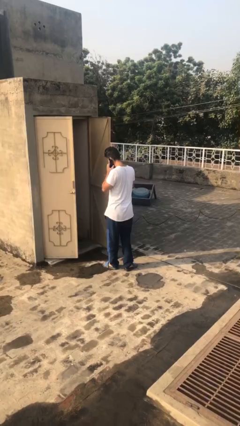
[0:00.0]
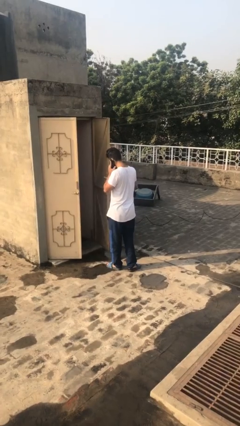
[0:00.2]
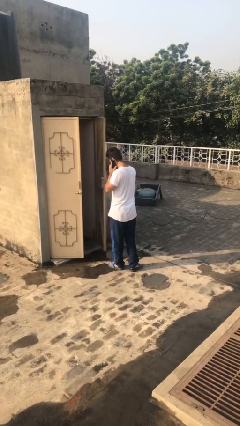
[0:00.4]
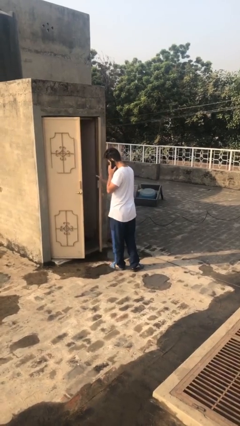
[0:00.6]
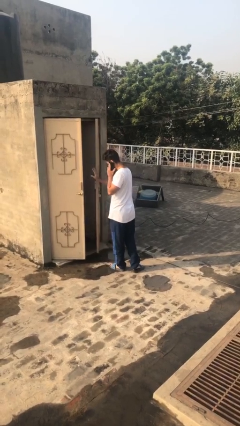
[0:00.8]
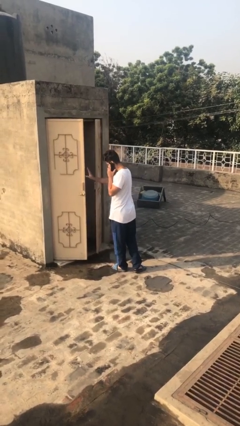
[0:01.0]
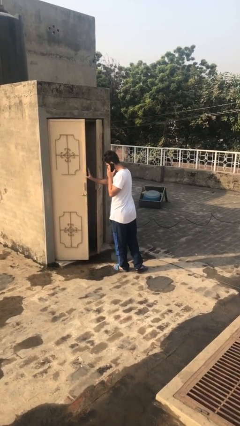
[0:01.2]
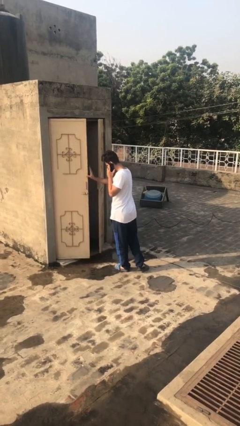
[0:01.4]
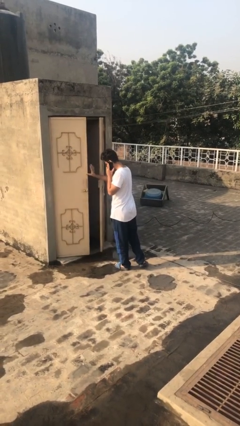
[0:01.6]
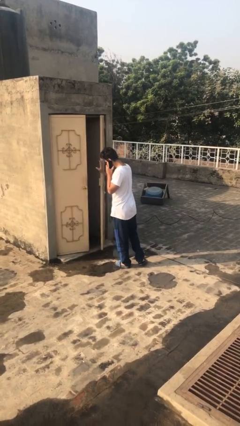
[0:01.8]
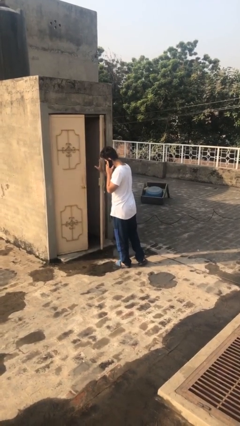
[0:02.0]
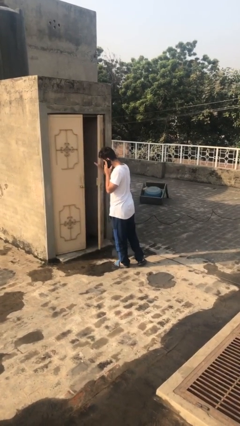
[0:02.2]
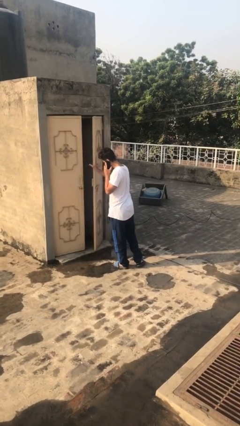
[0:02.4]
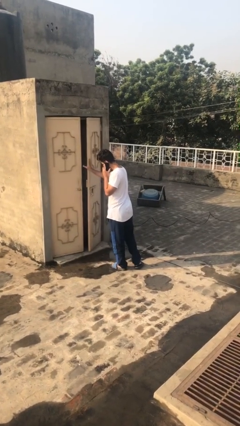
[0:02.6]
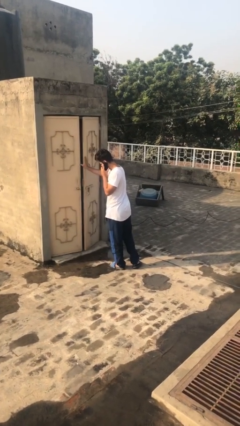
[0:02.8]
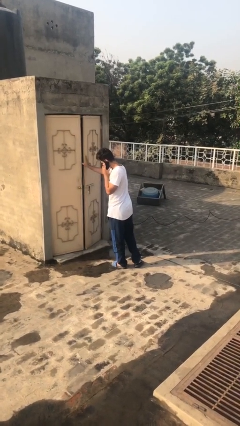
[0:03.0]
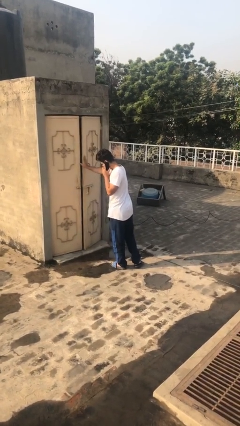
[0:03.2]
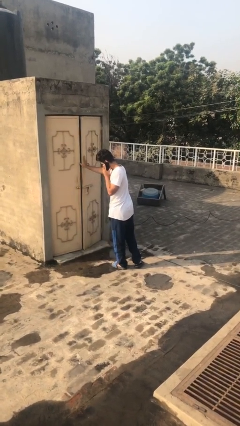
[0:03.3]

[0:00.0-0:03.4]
person closes facility door

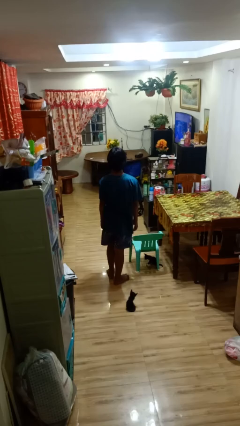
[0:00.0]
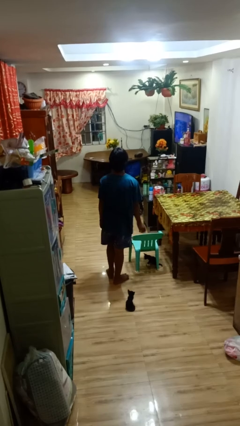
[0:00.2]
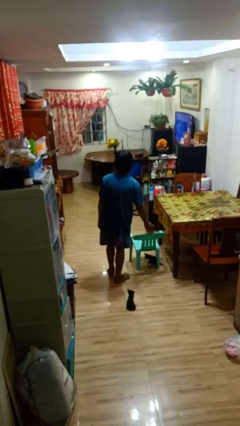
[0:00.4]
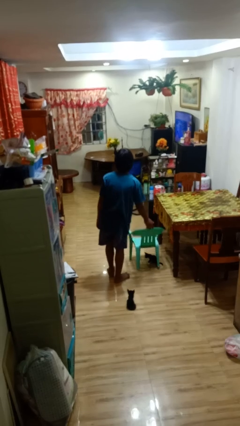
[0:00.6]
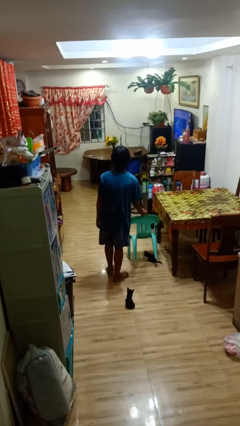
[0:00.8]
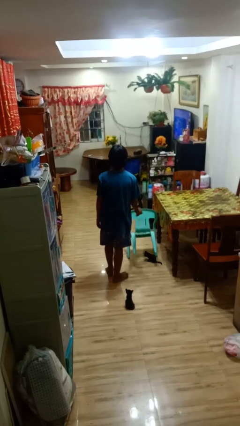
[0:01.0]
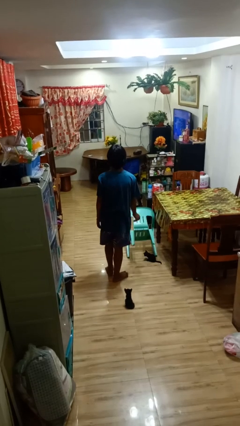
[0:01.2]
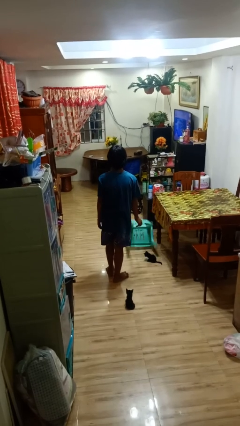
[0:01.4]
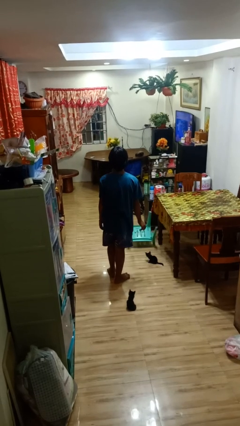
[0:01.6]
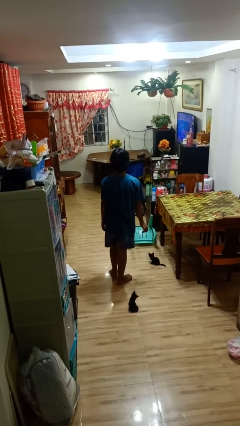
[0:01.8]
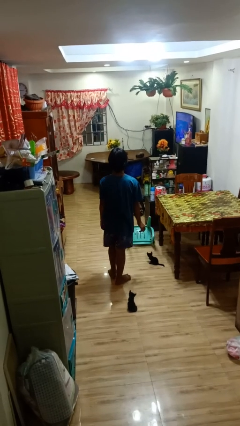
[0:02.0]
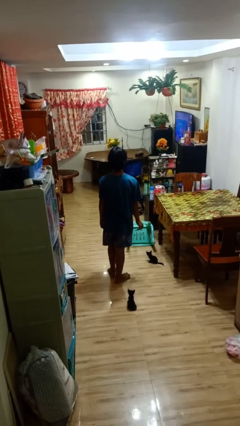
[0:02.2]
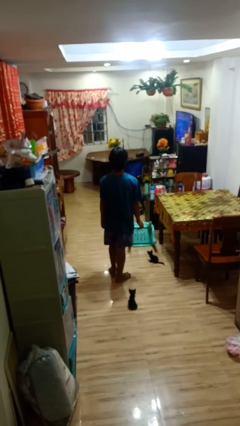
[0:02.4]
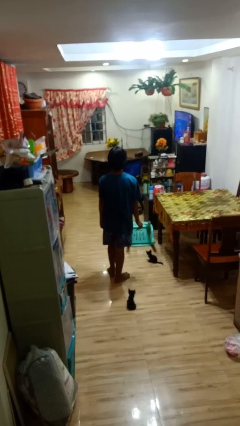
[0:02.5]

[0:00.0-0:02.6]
person knocks over furniture

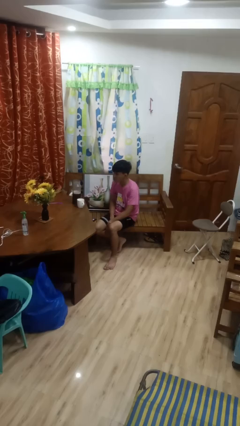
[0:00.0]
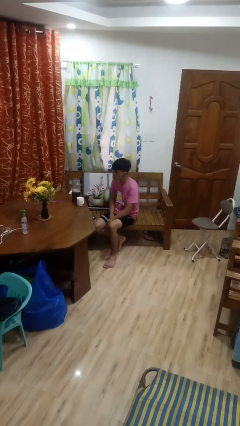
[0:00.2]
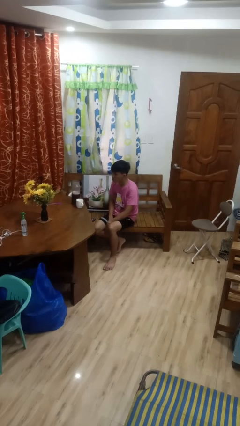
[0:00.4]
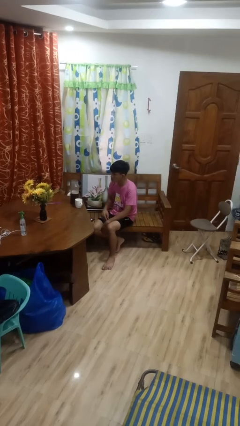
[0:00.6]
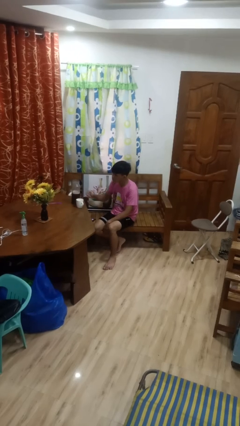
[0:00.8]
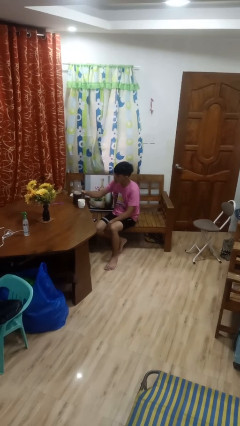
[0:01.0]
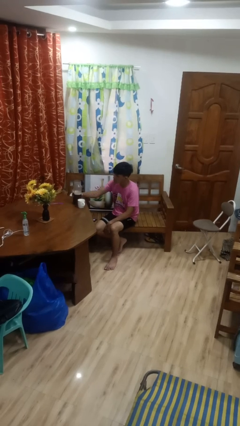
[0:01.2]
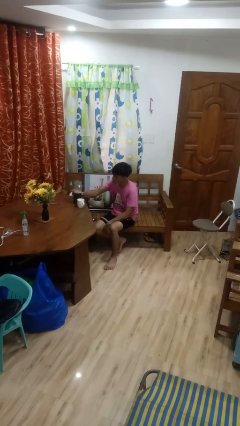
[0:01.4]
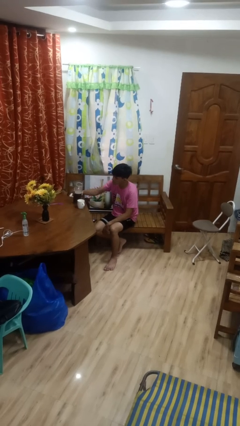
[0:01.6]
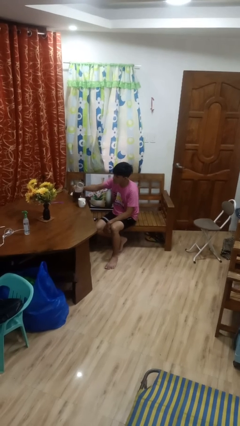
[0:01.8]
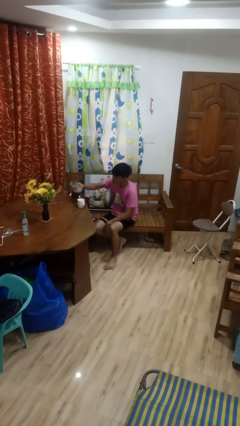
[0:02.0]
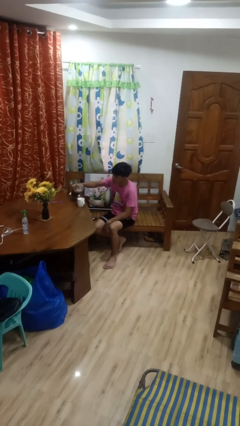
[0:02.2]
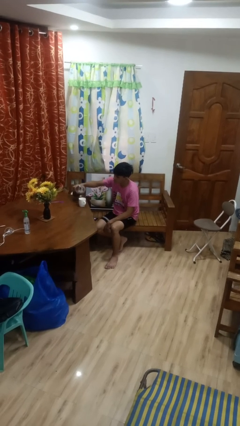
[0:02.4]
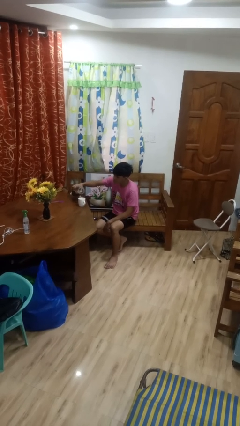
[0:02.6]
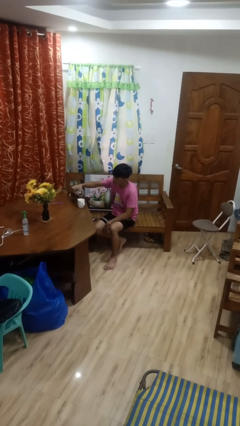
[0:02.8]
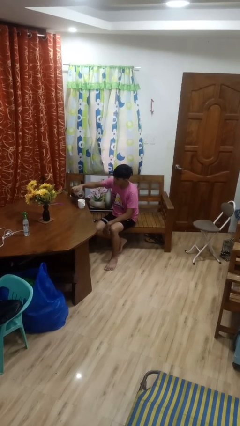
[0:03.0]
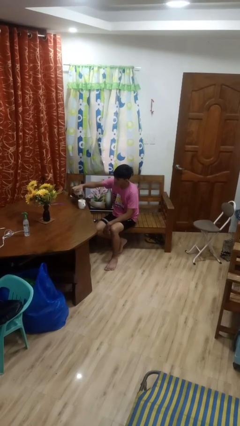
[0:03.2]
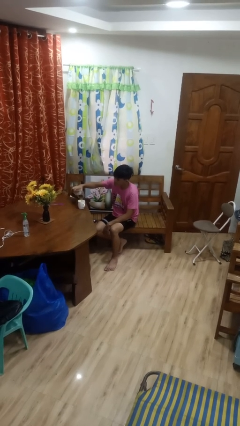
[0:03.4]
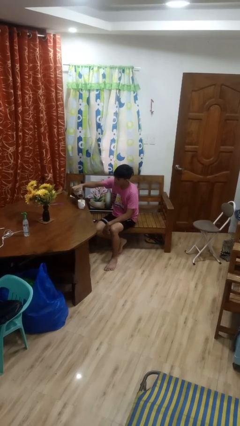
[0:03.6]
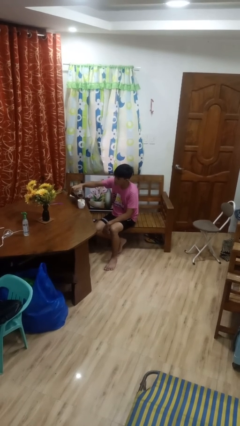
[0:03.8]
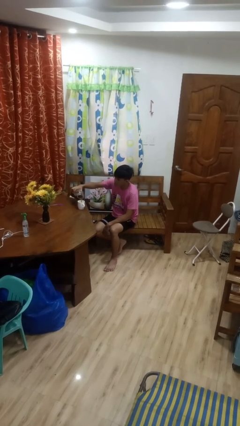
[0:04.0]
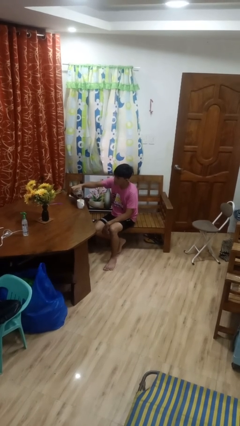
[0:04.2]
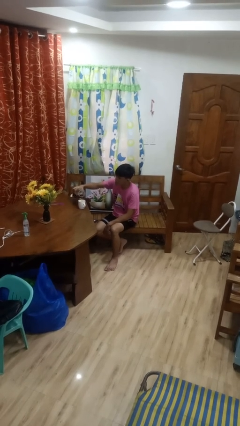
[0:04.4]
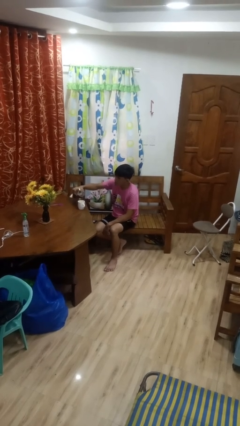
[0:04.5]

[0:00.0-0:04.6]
person pours coffee into mug

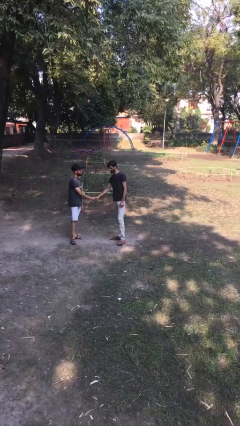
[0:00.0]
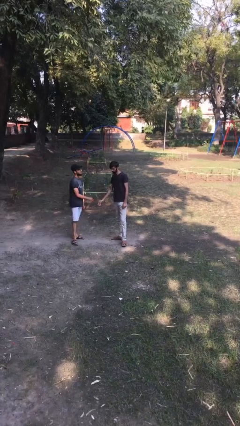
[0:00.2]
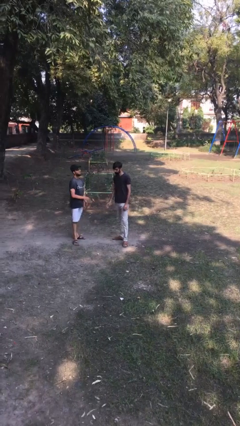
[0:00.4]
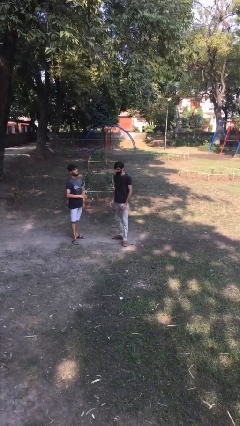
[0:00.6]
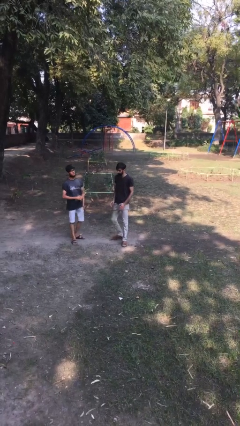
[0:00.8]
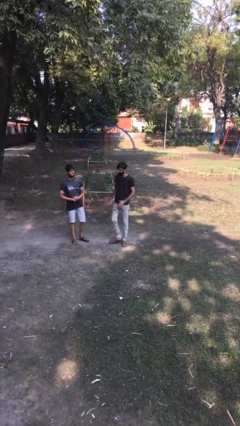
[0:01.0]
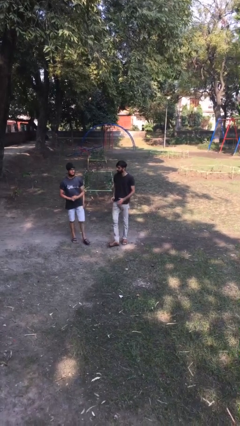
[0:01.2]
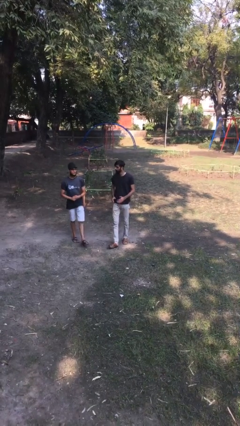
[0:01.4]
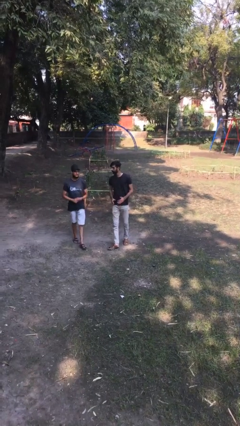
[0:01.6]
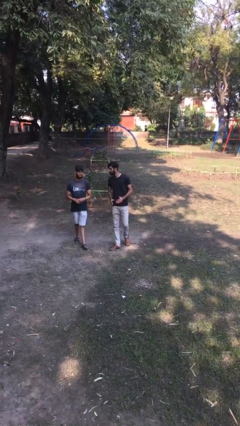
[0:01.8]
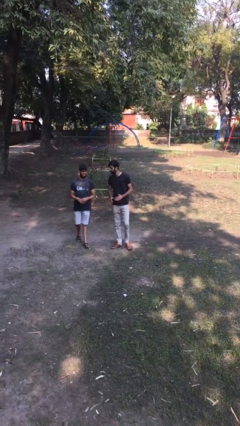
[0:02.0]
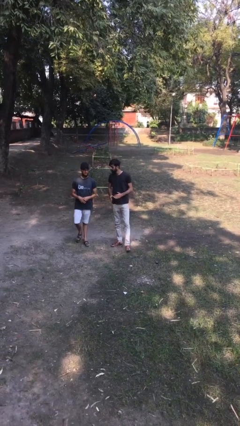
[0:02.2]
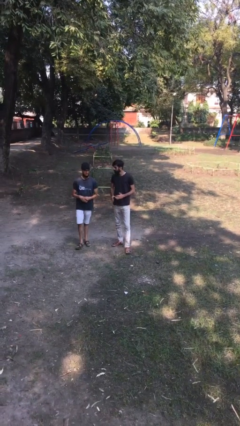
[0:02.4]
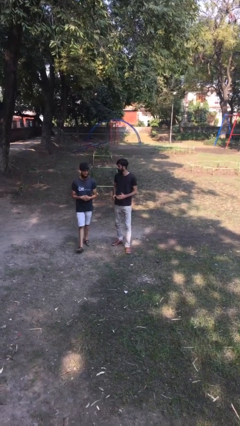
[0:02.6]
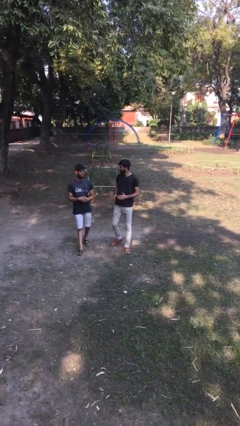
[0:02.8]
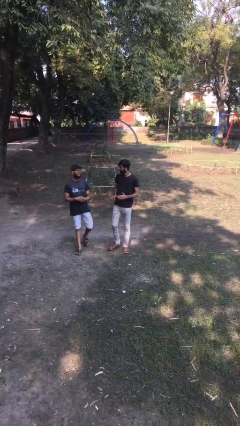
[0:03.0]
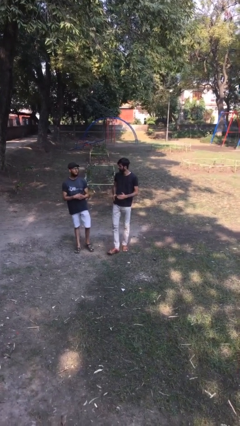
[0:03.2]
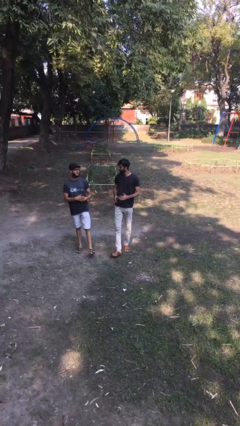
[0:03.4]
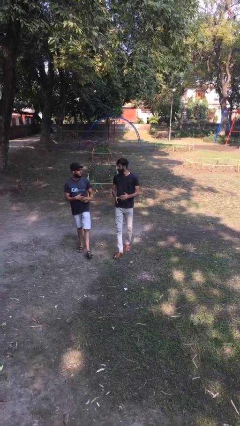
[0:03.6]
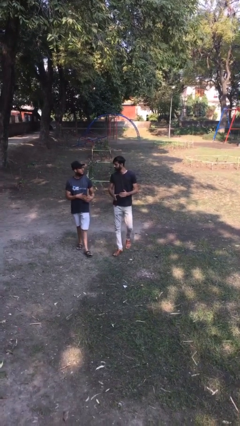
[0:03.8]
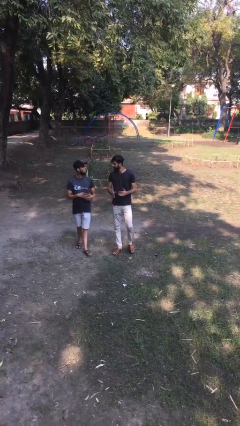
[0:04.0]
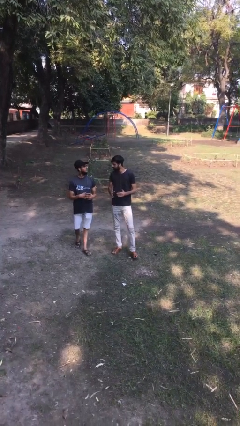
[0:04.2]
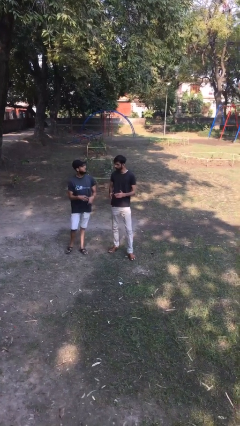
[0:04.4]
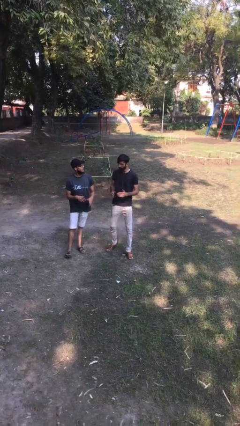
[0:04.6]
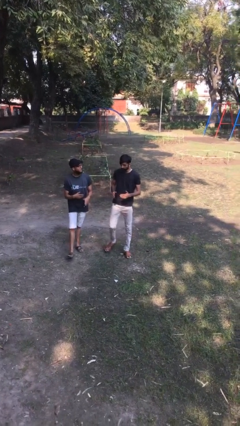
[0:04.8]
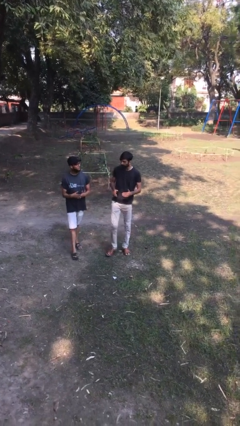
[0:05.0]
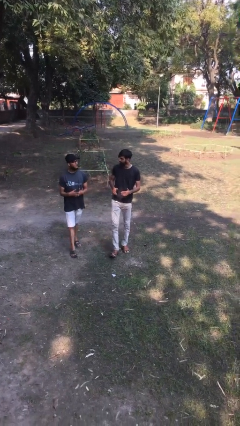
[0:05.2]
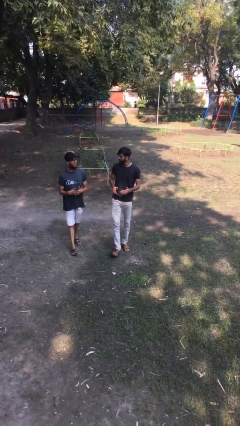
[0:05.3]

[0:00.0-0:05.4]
person talks to person

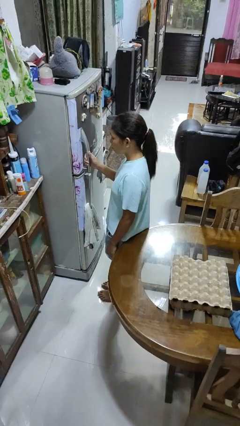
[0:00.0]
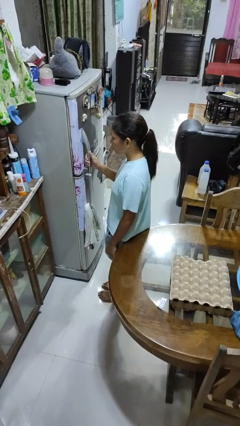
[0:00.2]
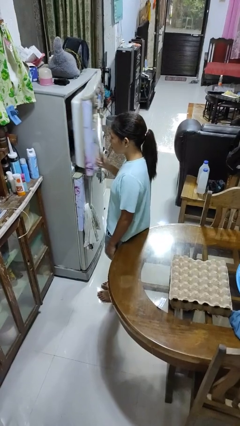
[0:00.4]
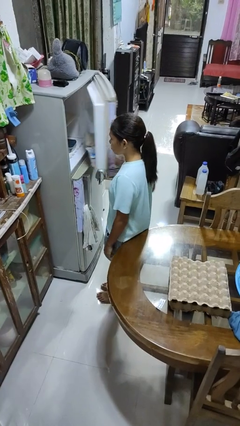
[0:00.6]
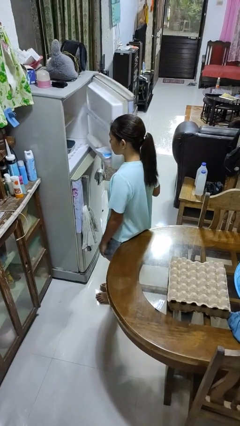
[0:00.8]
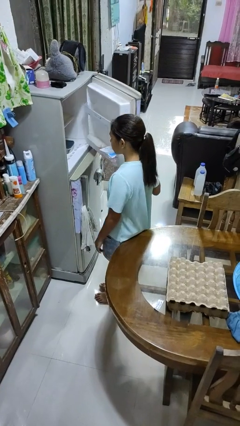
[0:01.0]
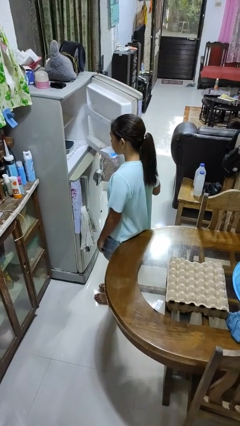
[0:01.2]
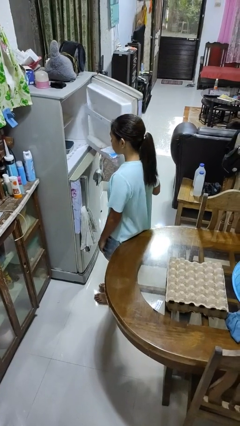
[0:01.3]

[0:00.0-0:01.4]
person opens refrigerator

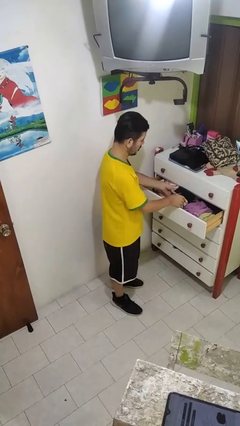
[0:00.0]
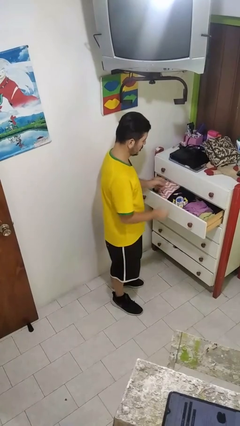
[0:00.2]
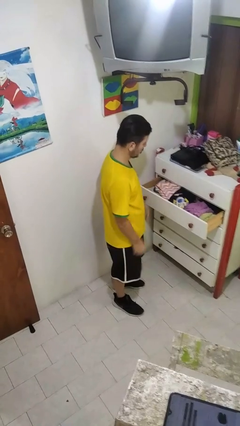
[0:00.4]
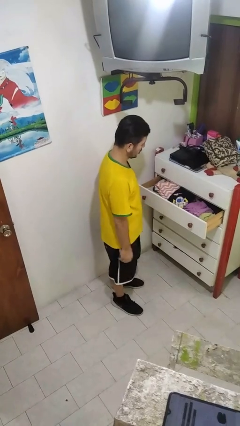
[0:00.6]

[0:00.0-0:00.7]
person puts clothes into dresser
